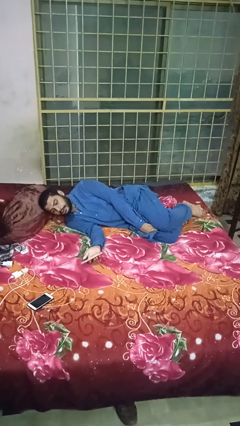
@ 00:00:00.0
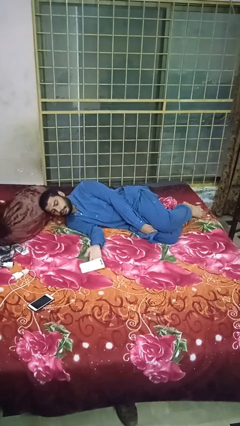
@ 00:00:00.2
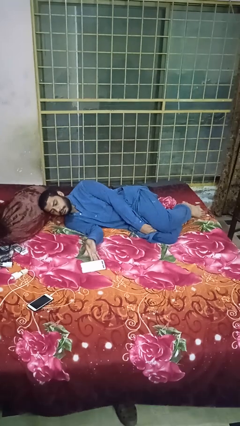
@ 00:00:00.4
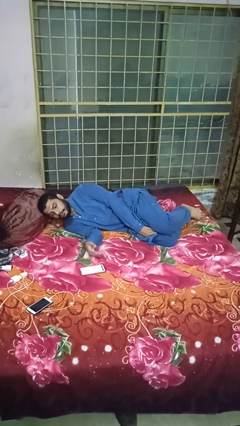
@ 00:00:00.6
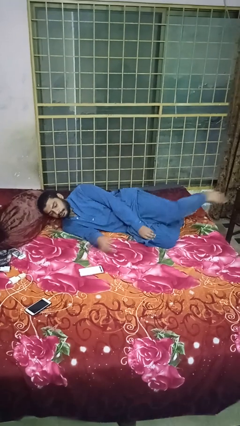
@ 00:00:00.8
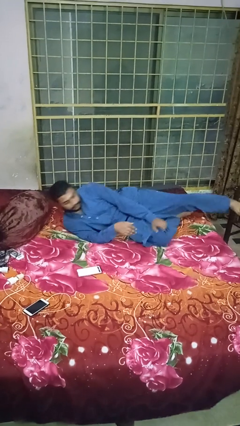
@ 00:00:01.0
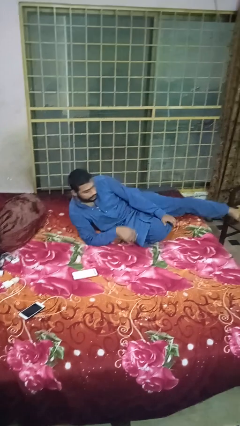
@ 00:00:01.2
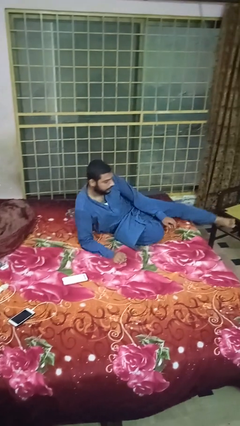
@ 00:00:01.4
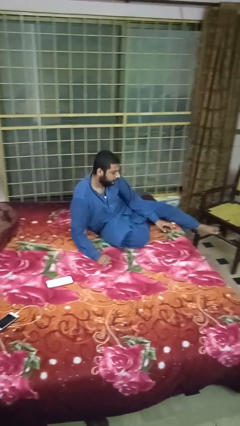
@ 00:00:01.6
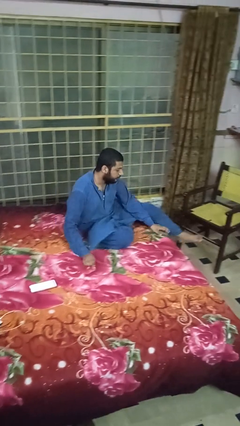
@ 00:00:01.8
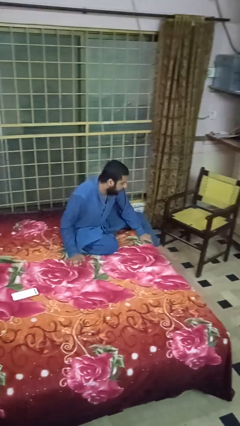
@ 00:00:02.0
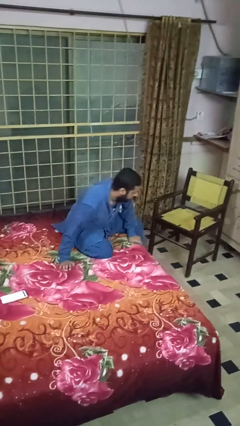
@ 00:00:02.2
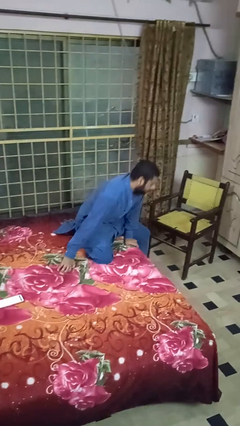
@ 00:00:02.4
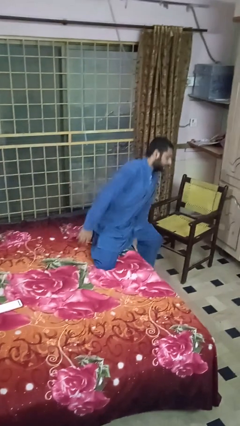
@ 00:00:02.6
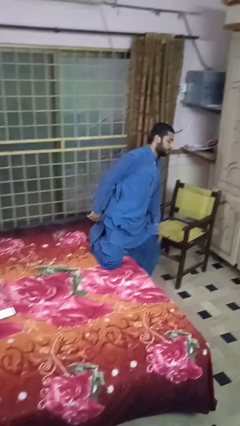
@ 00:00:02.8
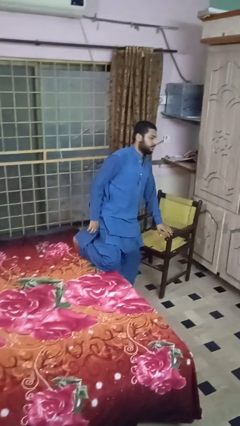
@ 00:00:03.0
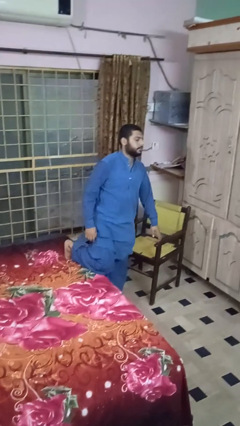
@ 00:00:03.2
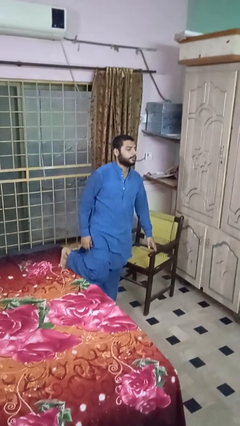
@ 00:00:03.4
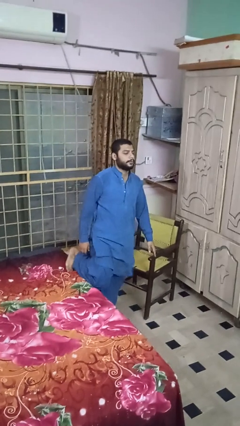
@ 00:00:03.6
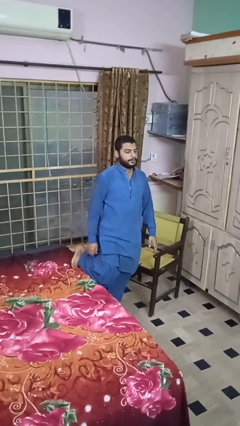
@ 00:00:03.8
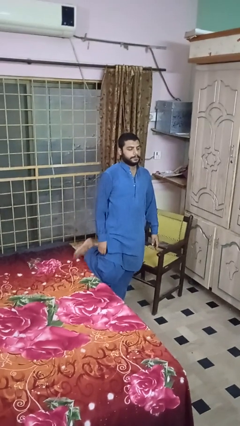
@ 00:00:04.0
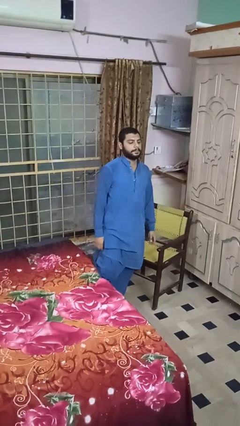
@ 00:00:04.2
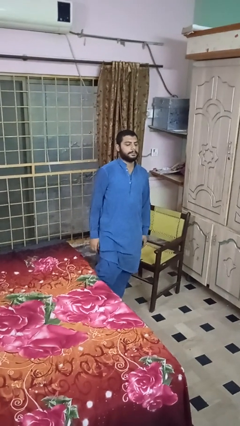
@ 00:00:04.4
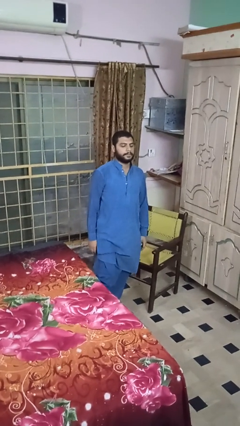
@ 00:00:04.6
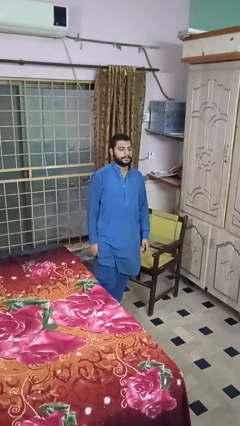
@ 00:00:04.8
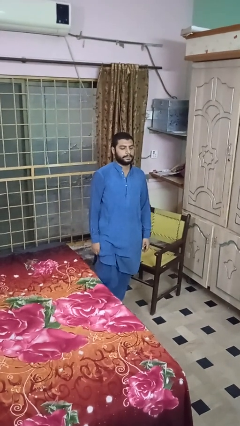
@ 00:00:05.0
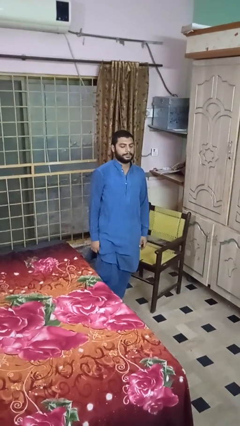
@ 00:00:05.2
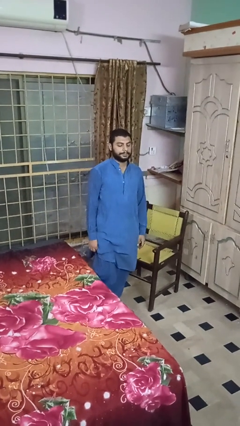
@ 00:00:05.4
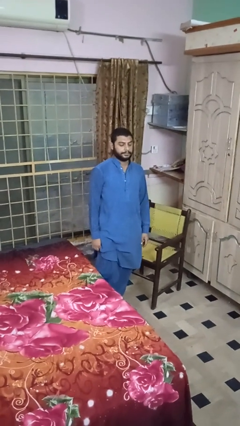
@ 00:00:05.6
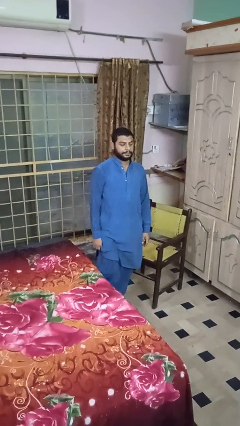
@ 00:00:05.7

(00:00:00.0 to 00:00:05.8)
person stands up

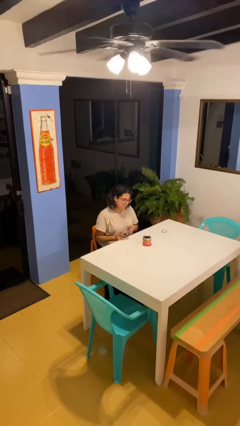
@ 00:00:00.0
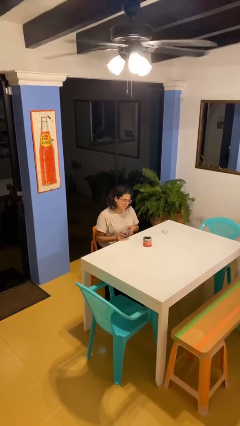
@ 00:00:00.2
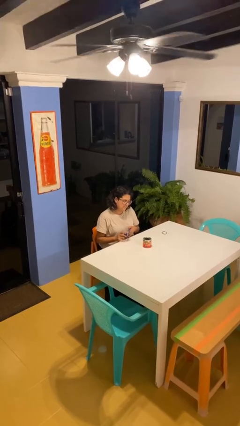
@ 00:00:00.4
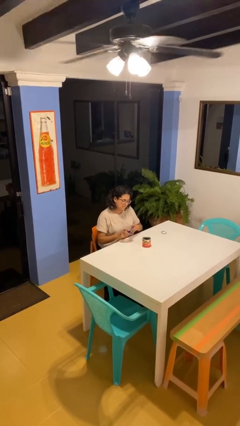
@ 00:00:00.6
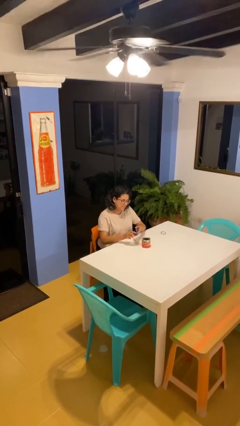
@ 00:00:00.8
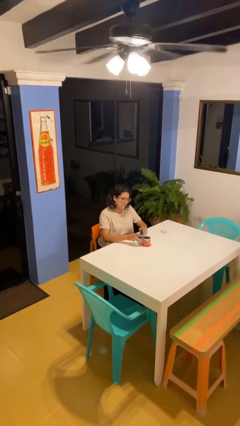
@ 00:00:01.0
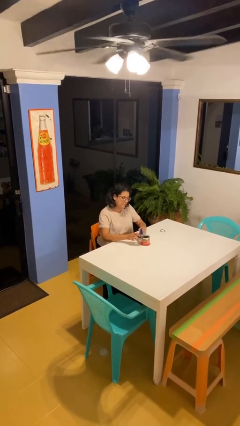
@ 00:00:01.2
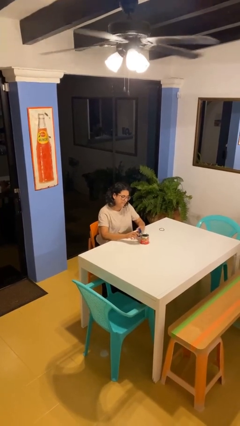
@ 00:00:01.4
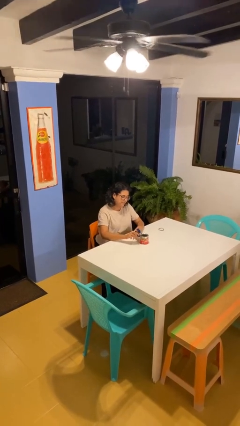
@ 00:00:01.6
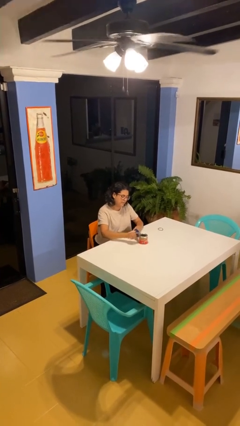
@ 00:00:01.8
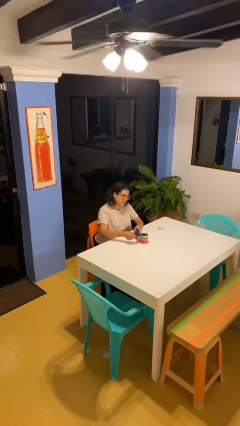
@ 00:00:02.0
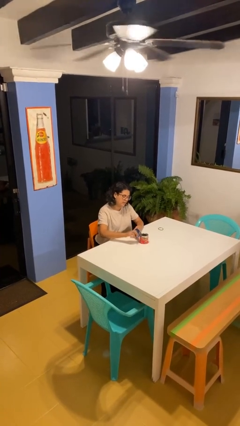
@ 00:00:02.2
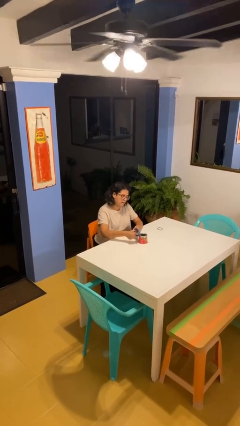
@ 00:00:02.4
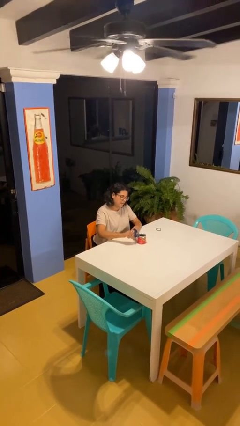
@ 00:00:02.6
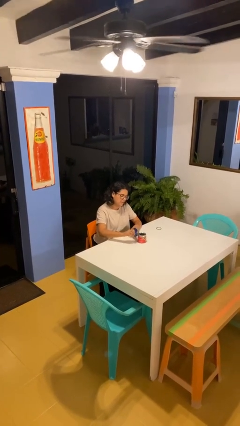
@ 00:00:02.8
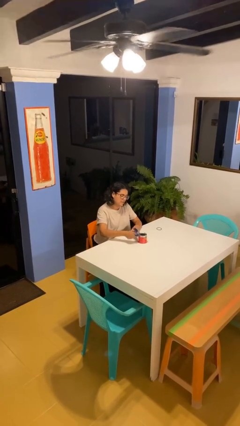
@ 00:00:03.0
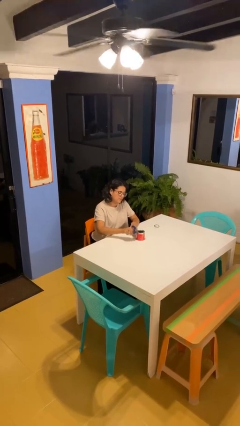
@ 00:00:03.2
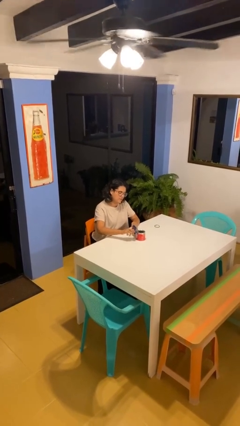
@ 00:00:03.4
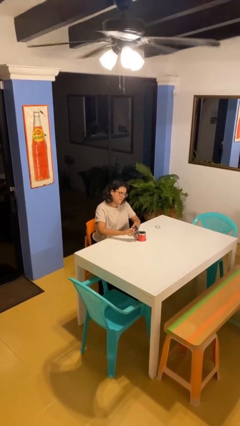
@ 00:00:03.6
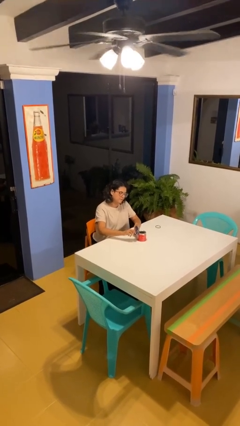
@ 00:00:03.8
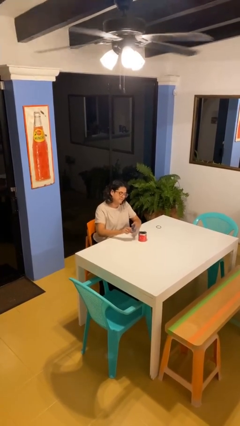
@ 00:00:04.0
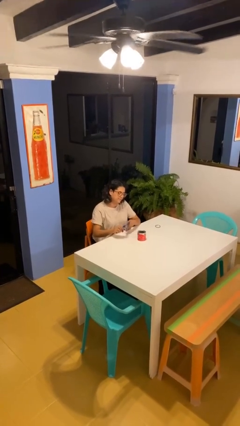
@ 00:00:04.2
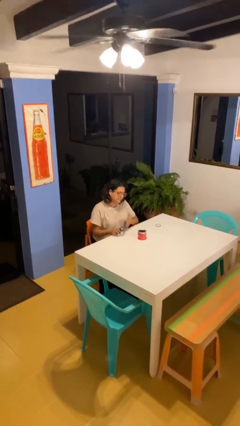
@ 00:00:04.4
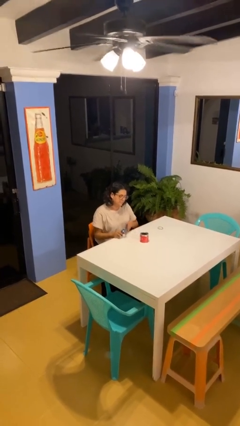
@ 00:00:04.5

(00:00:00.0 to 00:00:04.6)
person opens can with can opener

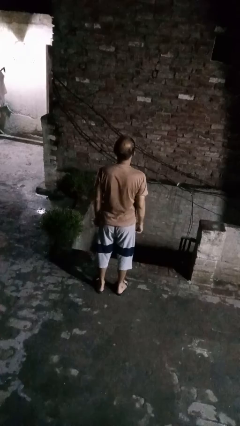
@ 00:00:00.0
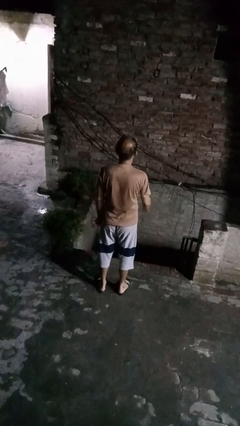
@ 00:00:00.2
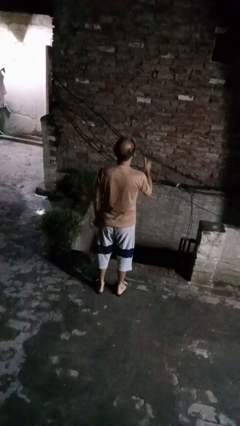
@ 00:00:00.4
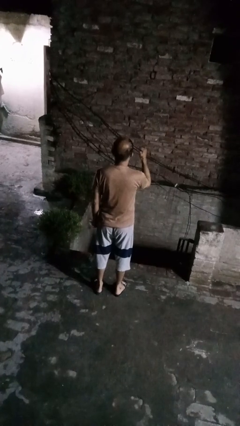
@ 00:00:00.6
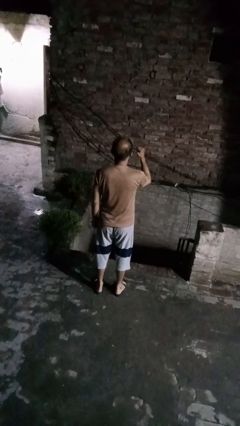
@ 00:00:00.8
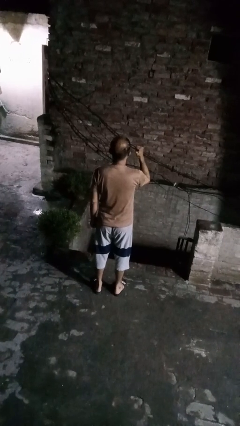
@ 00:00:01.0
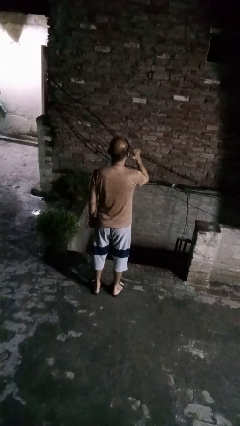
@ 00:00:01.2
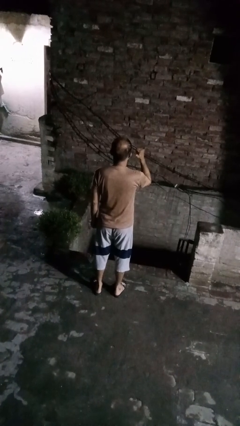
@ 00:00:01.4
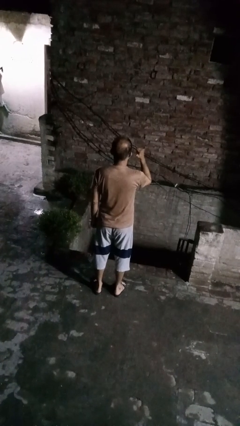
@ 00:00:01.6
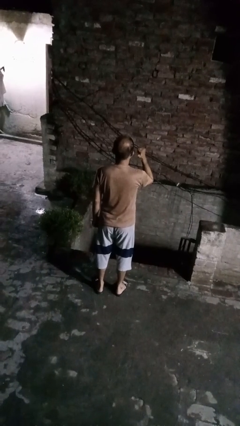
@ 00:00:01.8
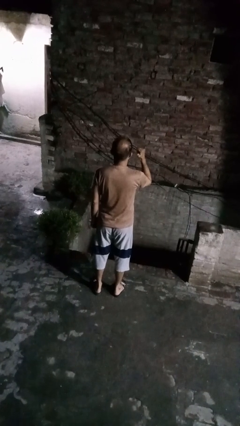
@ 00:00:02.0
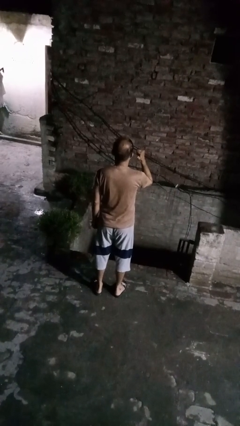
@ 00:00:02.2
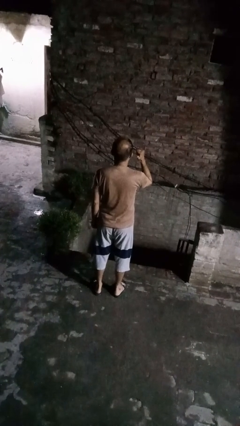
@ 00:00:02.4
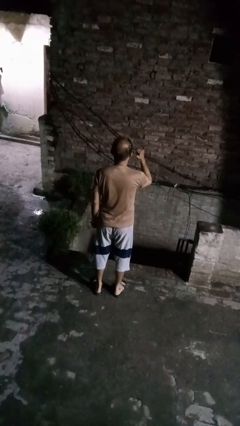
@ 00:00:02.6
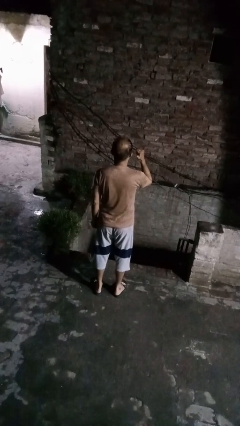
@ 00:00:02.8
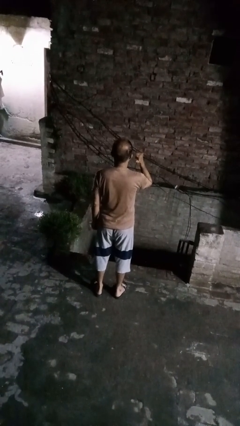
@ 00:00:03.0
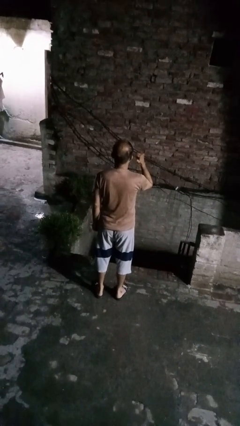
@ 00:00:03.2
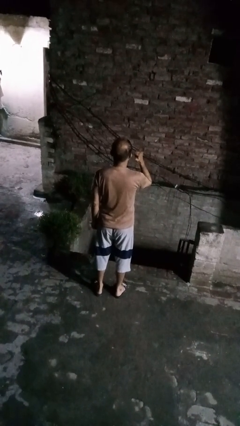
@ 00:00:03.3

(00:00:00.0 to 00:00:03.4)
person gestures behind me

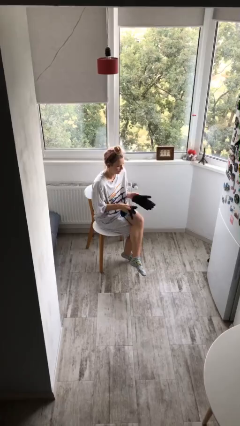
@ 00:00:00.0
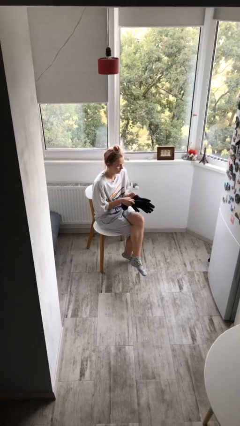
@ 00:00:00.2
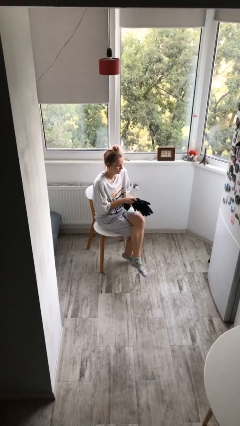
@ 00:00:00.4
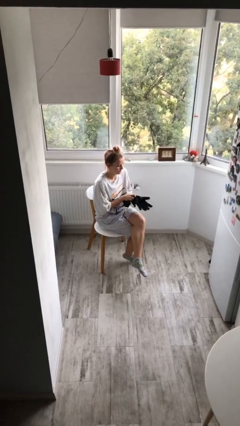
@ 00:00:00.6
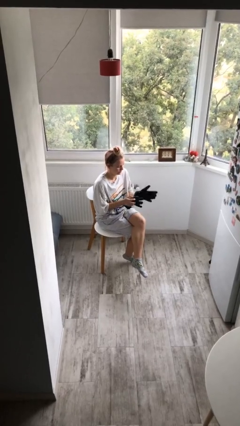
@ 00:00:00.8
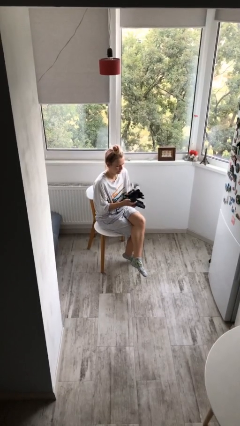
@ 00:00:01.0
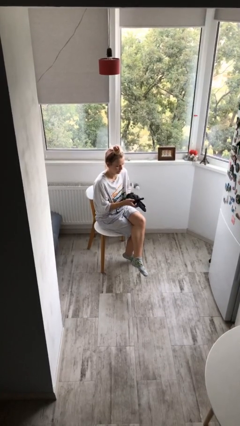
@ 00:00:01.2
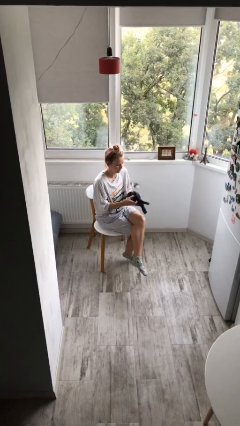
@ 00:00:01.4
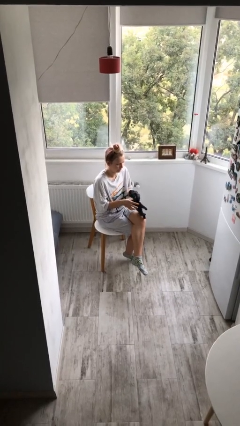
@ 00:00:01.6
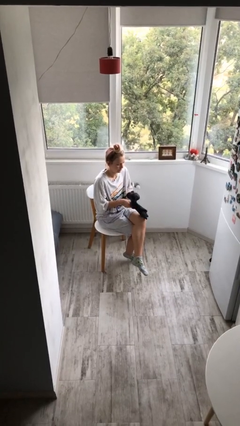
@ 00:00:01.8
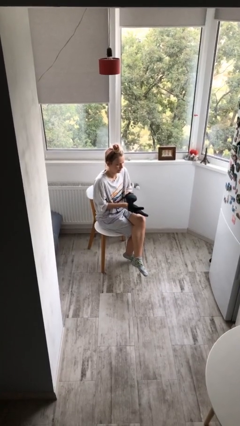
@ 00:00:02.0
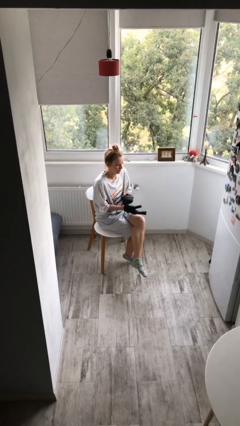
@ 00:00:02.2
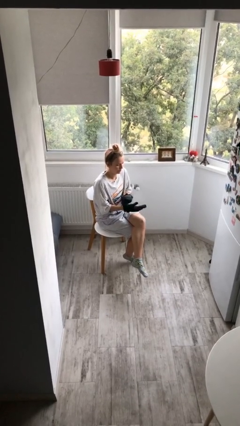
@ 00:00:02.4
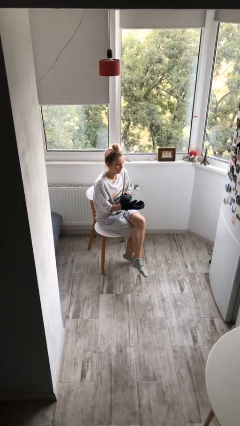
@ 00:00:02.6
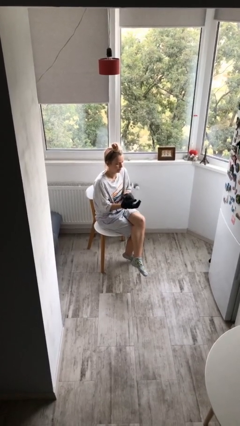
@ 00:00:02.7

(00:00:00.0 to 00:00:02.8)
person puts on gloves

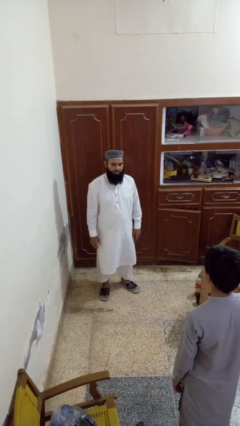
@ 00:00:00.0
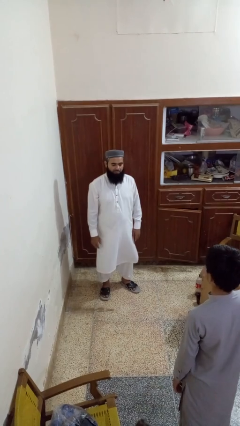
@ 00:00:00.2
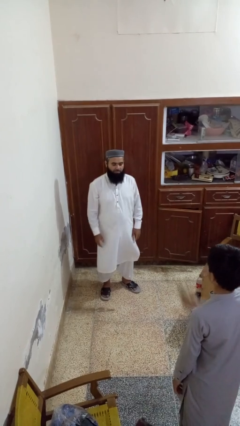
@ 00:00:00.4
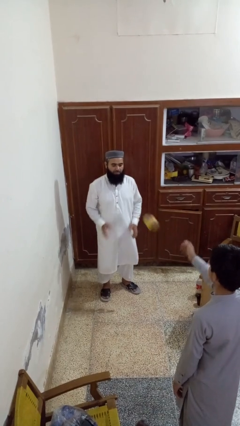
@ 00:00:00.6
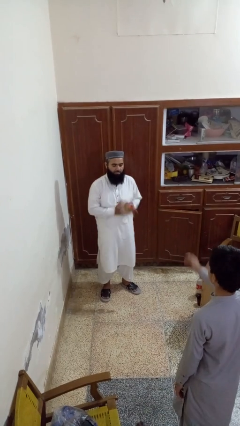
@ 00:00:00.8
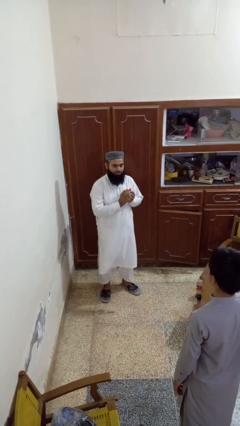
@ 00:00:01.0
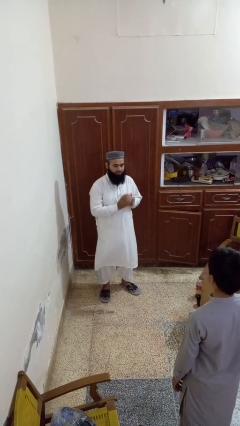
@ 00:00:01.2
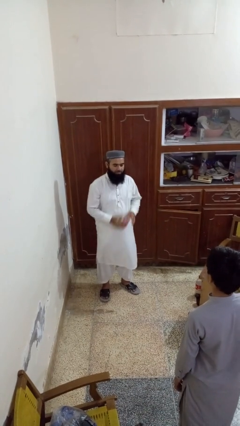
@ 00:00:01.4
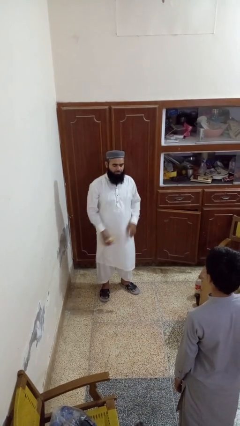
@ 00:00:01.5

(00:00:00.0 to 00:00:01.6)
person catches object from person
